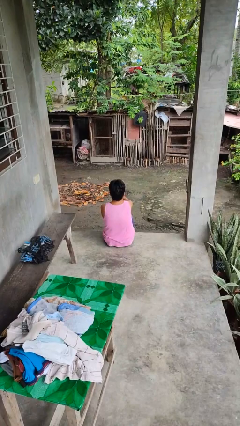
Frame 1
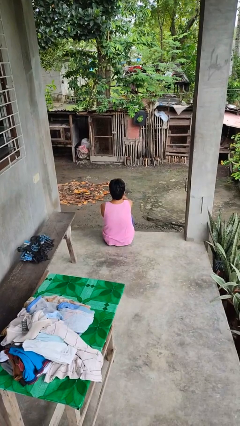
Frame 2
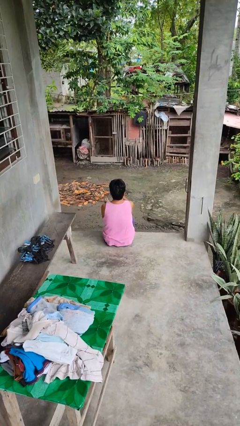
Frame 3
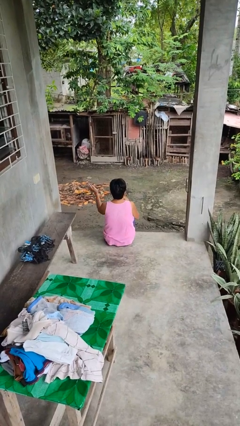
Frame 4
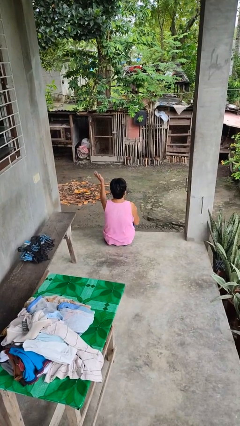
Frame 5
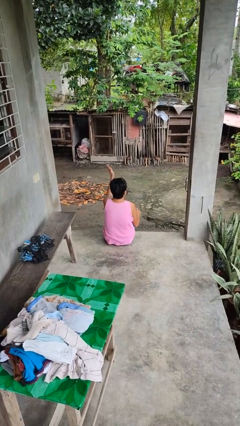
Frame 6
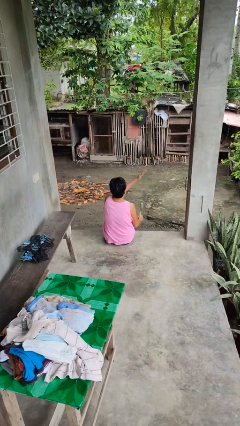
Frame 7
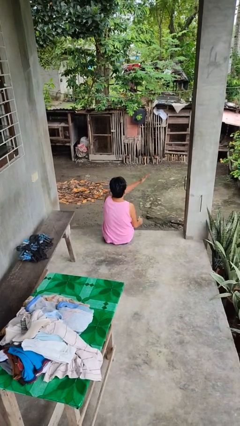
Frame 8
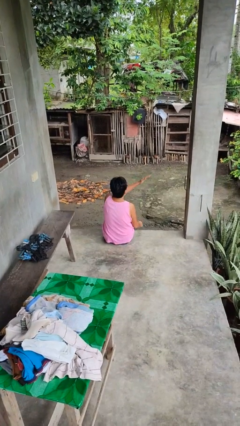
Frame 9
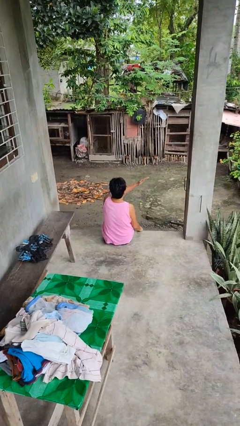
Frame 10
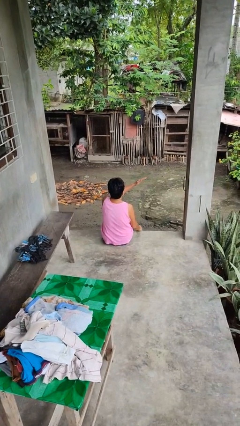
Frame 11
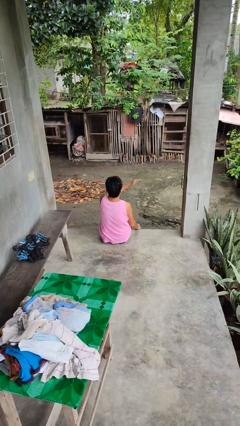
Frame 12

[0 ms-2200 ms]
person gestures swipe right

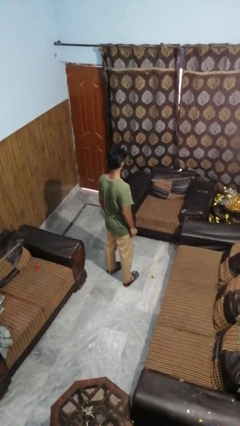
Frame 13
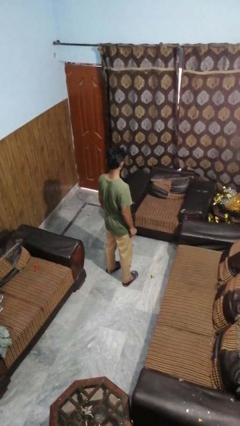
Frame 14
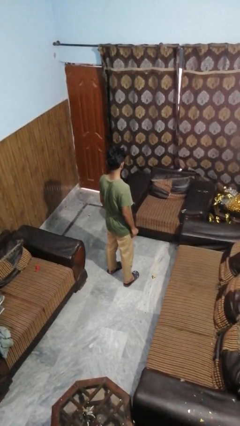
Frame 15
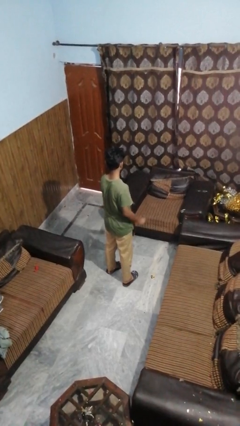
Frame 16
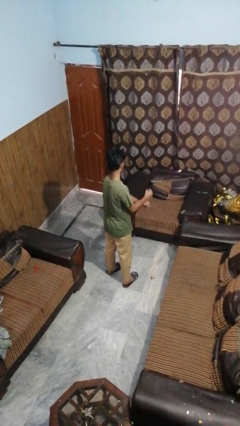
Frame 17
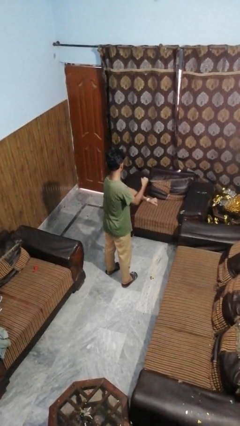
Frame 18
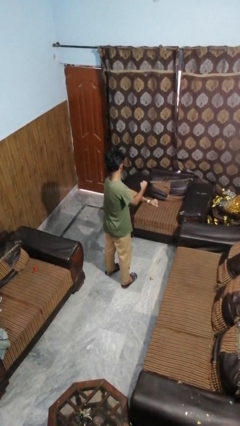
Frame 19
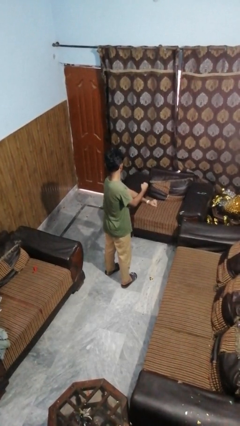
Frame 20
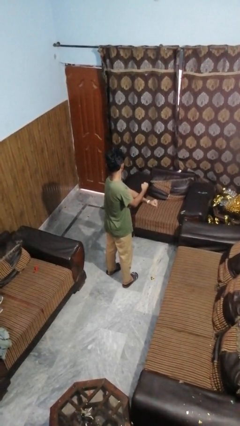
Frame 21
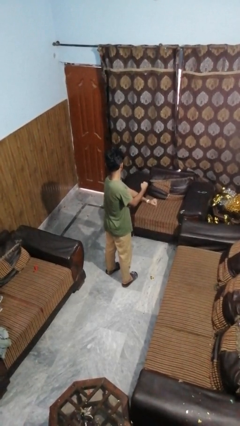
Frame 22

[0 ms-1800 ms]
person gestures arms x

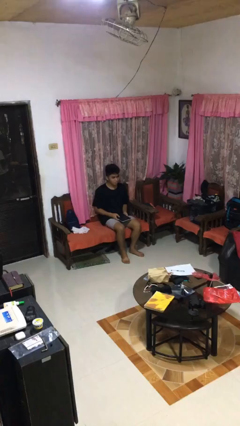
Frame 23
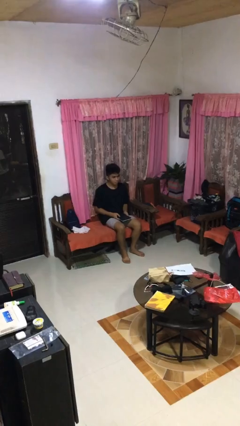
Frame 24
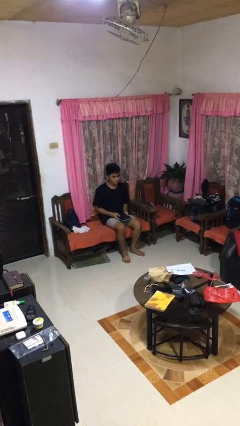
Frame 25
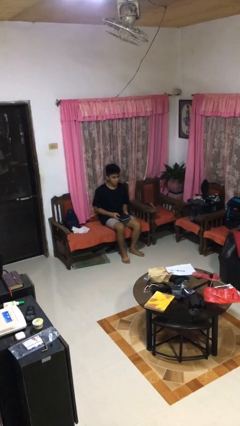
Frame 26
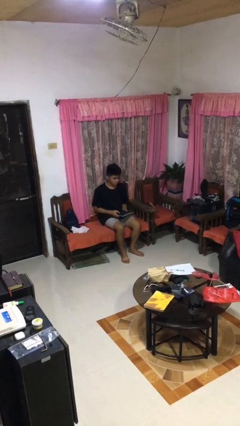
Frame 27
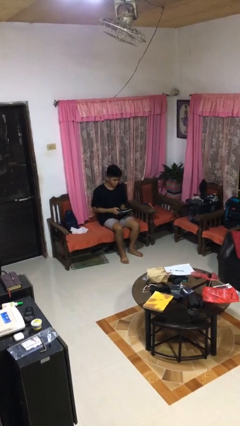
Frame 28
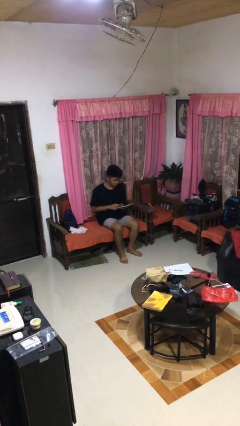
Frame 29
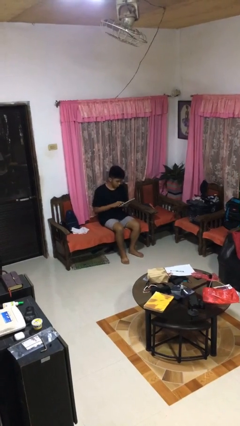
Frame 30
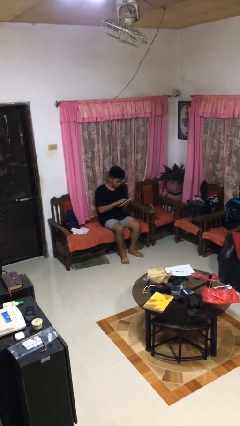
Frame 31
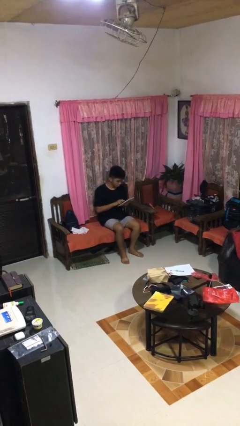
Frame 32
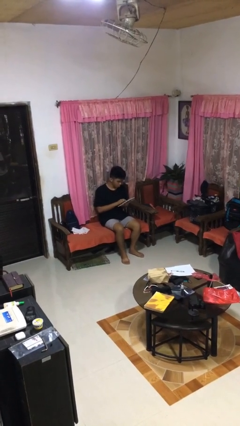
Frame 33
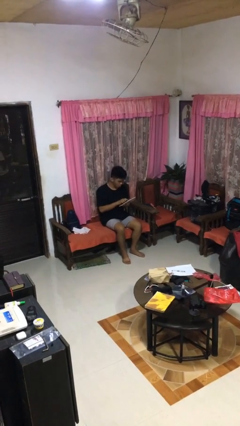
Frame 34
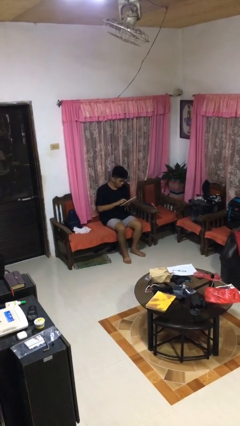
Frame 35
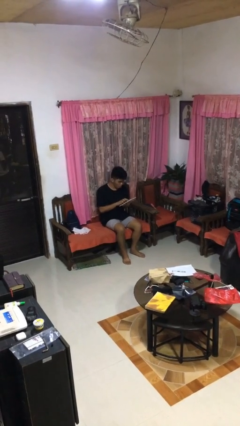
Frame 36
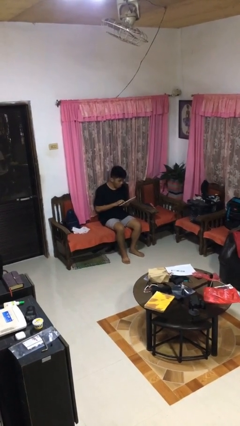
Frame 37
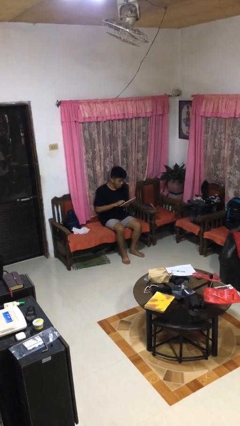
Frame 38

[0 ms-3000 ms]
person interacts with tablet

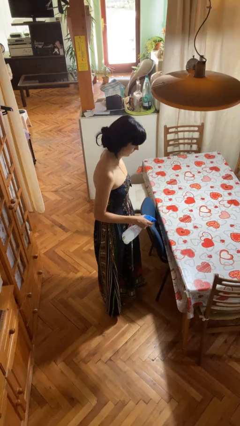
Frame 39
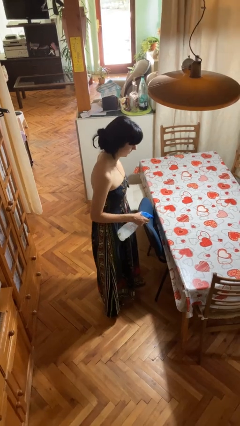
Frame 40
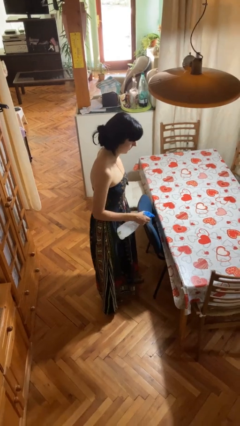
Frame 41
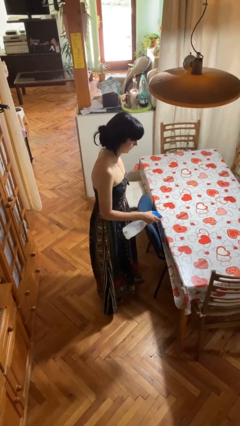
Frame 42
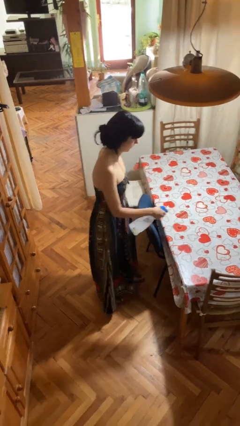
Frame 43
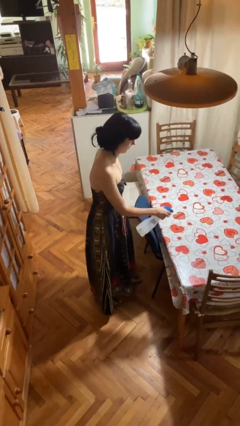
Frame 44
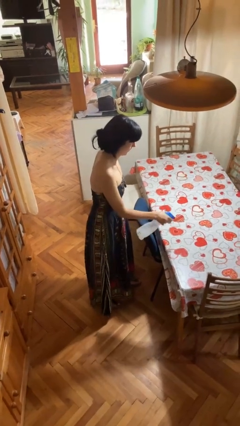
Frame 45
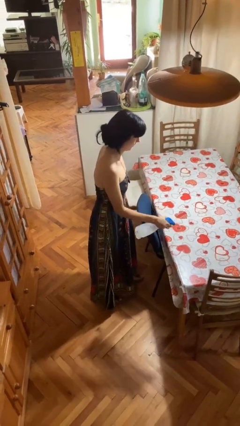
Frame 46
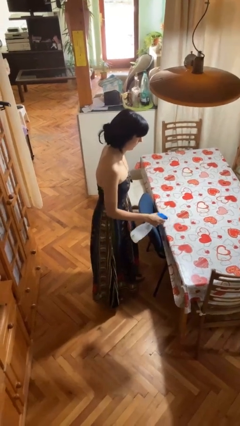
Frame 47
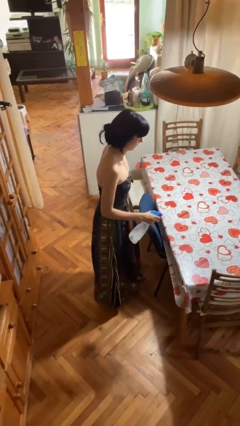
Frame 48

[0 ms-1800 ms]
person sprays from bottle

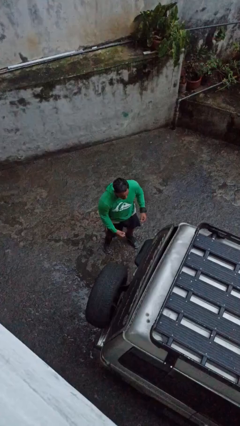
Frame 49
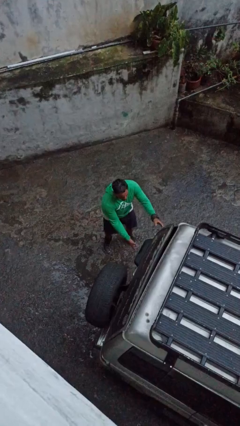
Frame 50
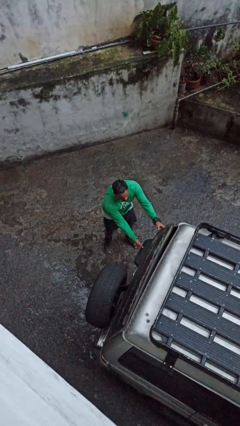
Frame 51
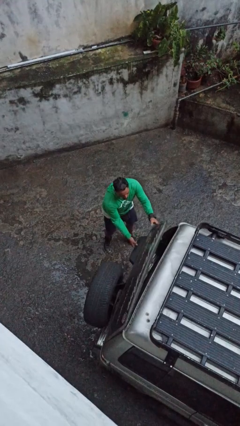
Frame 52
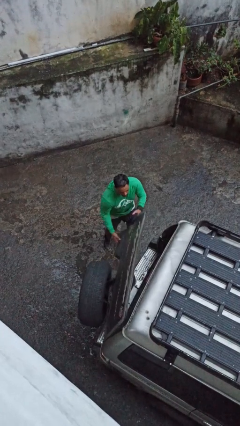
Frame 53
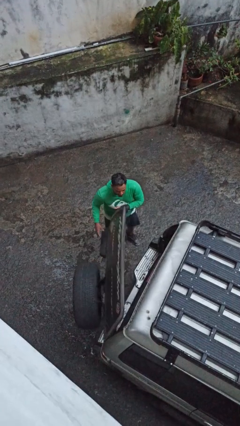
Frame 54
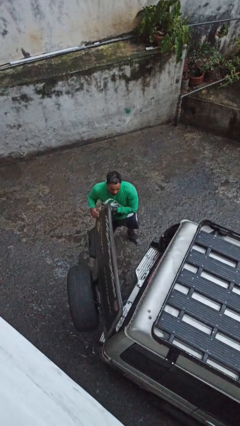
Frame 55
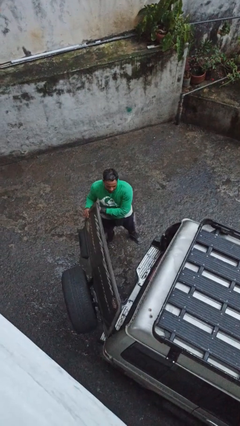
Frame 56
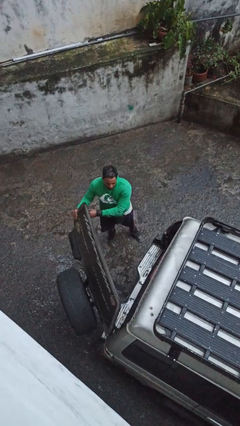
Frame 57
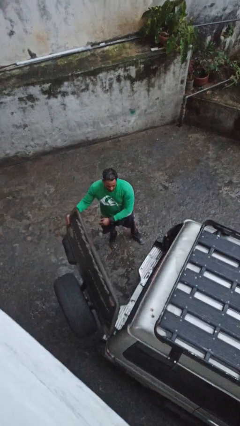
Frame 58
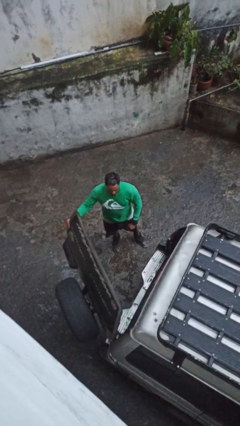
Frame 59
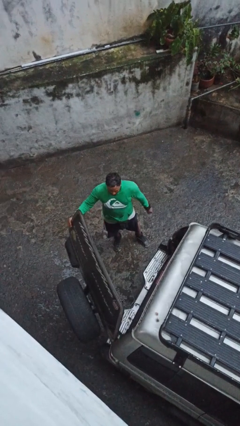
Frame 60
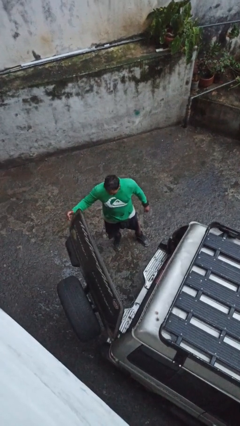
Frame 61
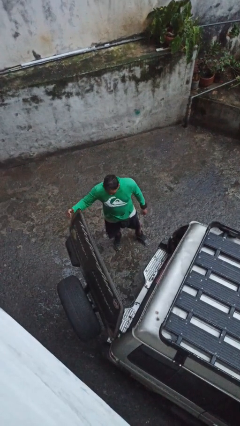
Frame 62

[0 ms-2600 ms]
person opens car trunk

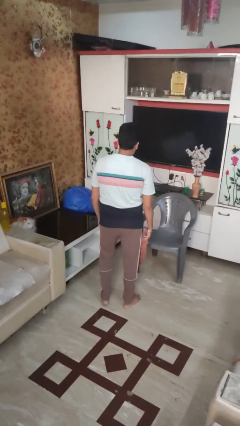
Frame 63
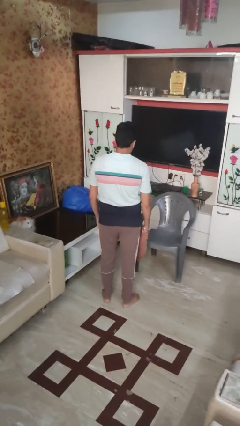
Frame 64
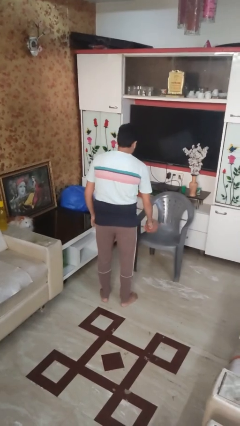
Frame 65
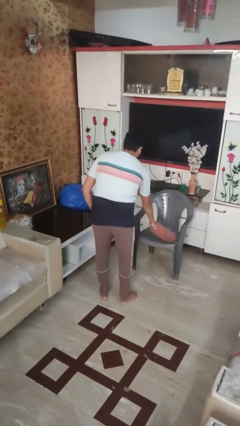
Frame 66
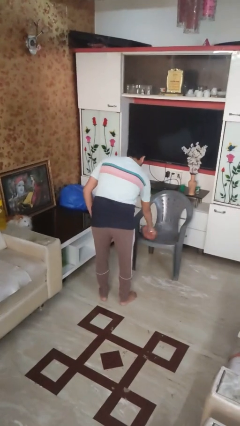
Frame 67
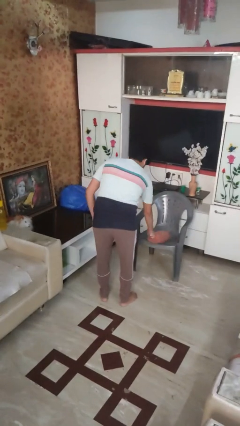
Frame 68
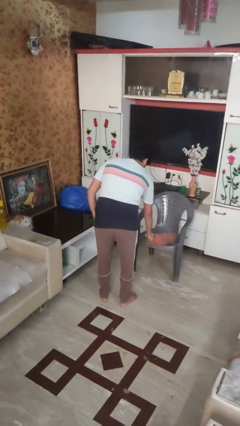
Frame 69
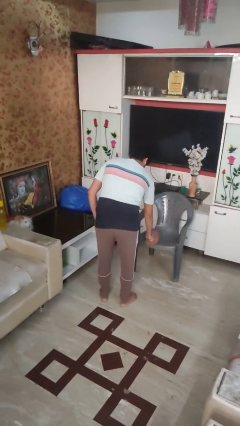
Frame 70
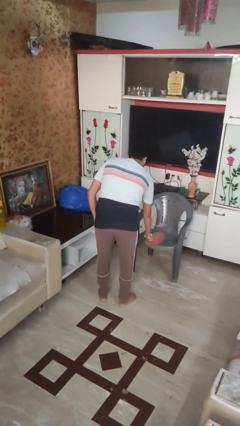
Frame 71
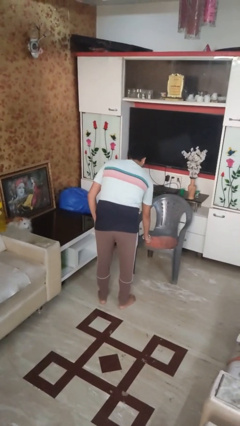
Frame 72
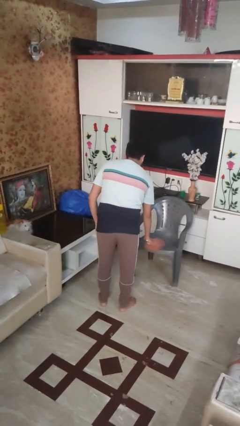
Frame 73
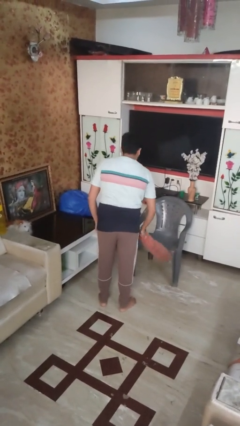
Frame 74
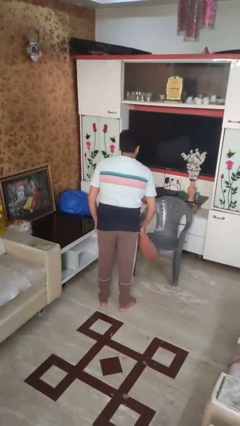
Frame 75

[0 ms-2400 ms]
person dusts furniture

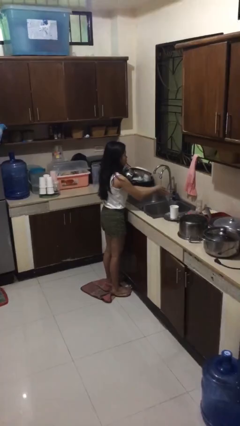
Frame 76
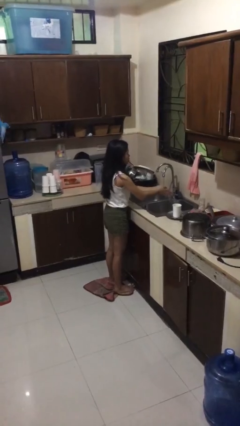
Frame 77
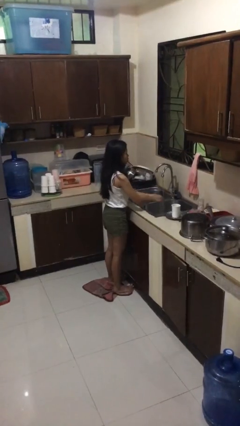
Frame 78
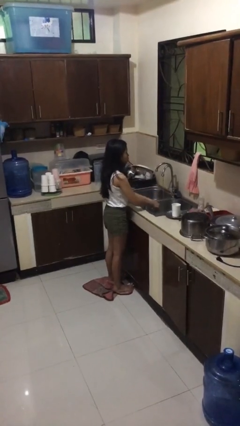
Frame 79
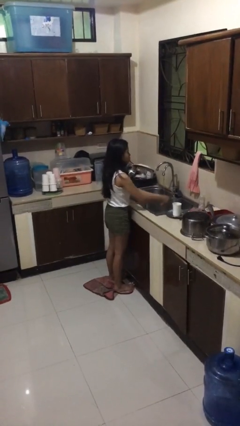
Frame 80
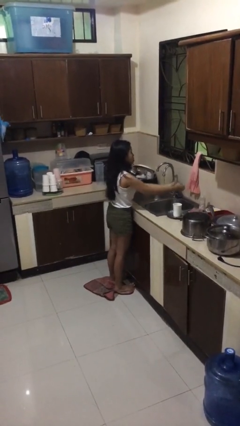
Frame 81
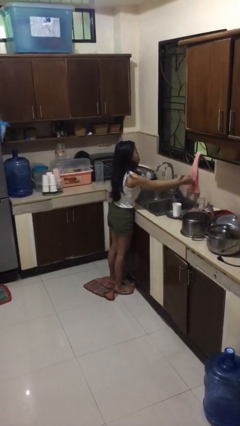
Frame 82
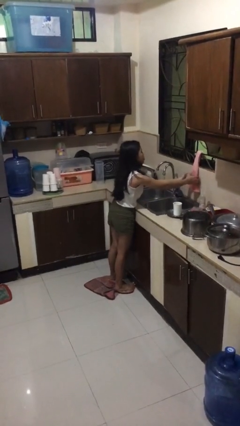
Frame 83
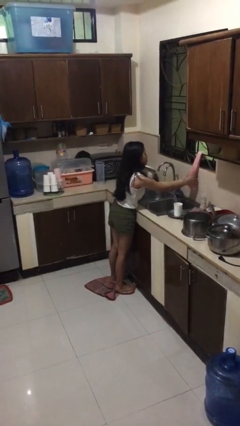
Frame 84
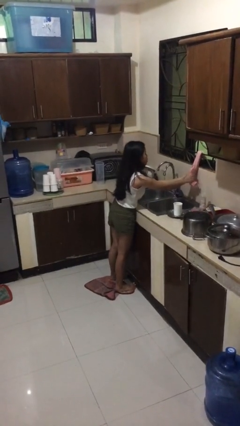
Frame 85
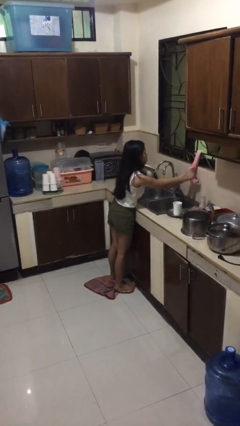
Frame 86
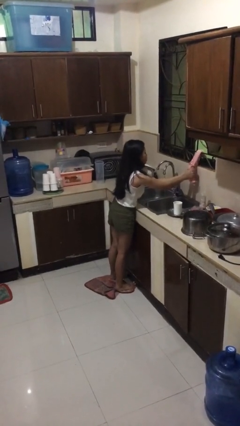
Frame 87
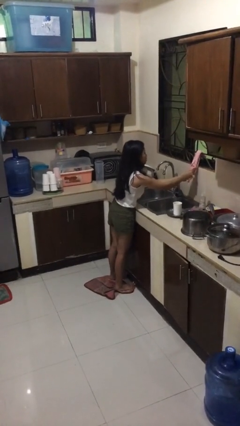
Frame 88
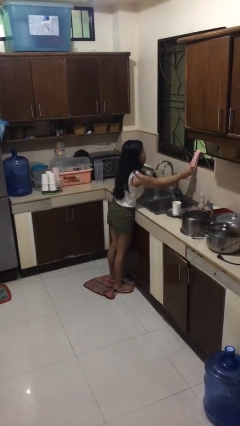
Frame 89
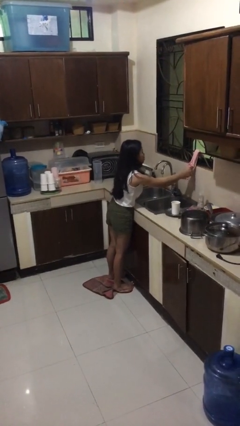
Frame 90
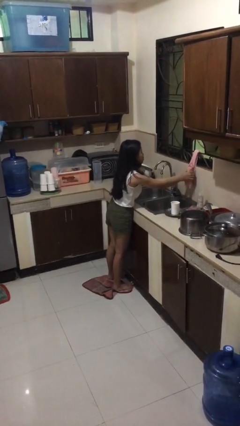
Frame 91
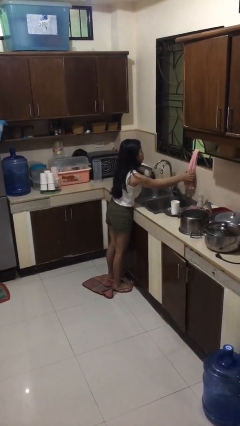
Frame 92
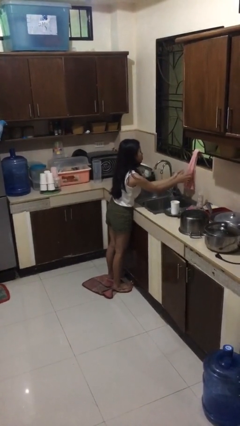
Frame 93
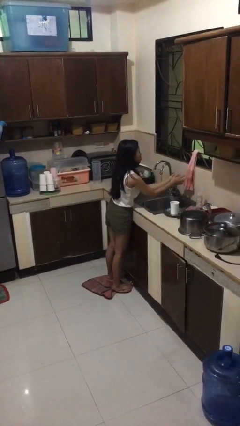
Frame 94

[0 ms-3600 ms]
person dries hands with towel
